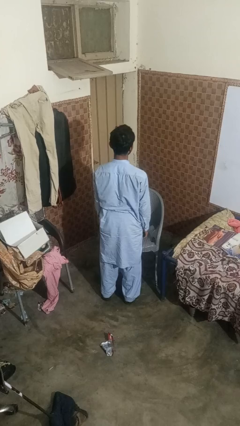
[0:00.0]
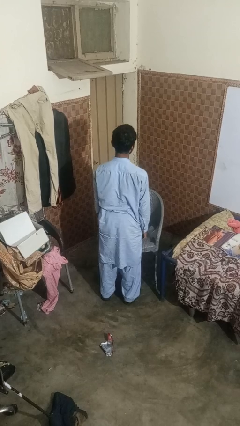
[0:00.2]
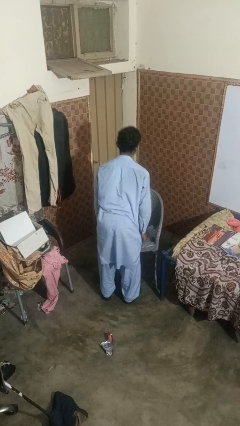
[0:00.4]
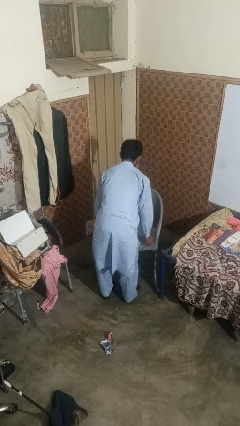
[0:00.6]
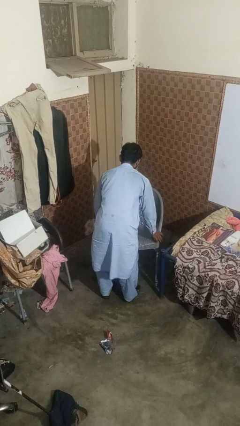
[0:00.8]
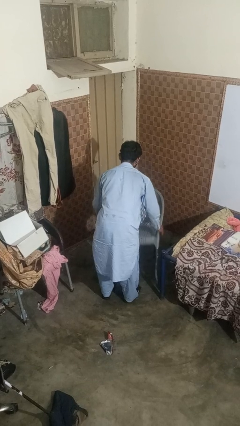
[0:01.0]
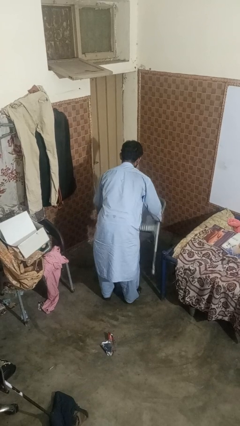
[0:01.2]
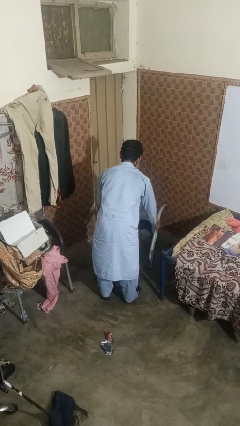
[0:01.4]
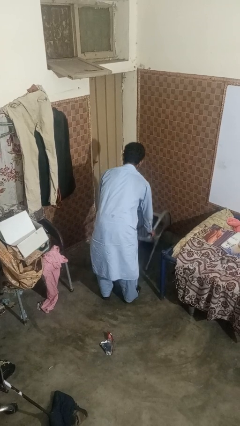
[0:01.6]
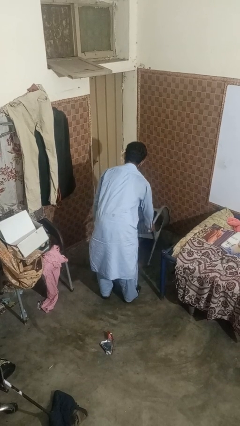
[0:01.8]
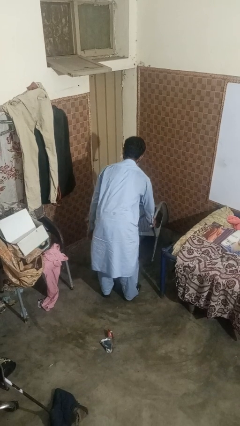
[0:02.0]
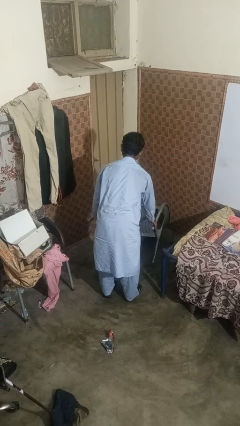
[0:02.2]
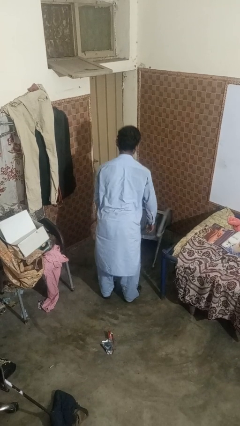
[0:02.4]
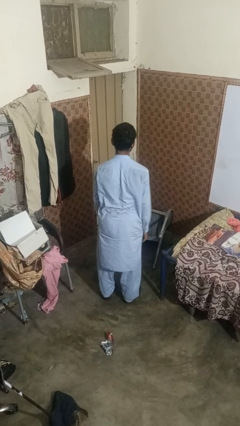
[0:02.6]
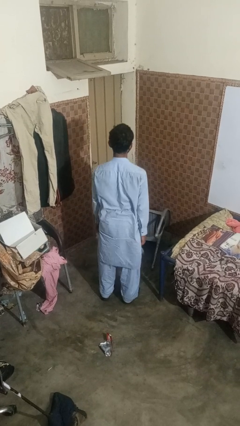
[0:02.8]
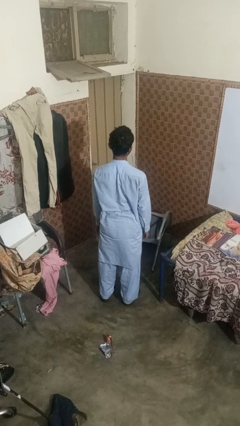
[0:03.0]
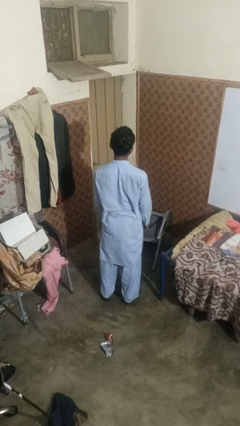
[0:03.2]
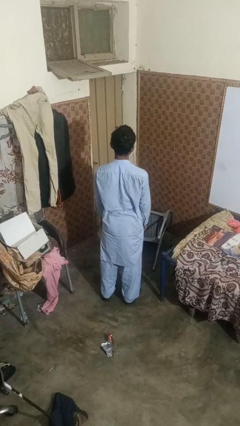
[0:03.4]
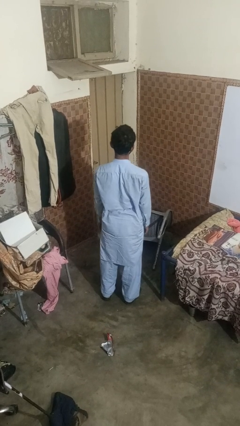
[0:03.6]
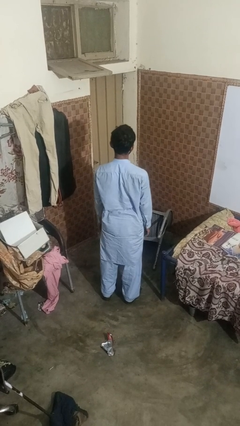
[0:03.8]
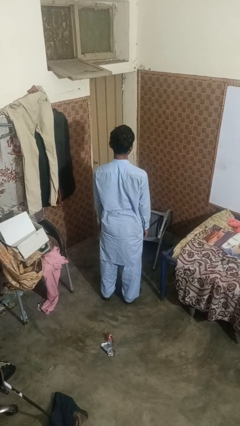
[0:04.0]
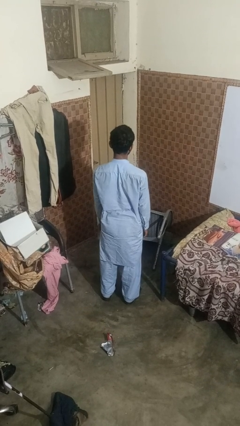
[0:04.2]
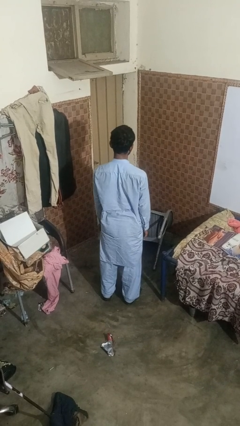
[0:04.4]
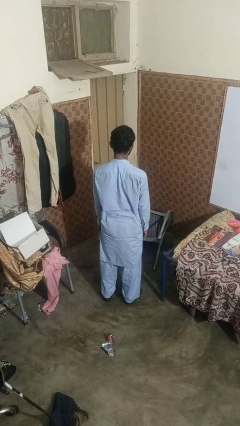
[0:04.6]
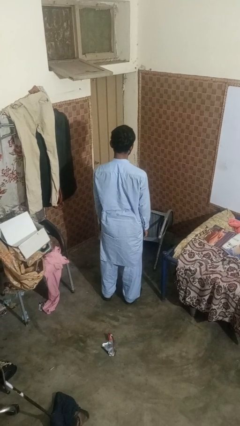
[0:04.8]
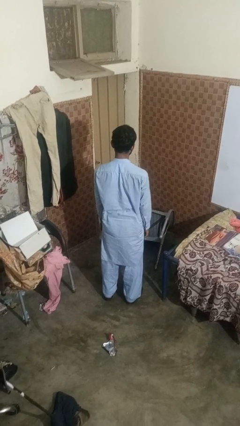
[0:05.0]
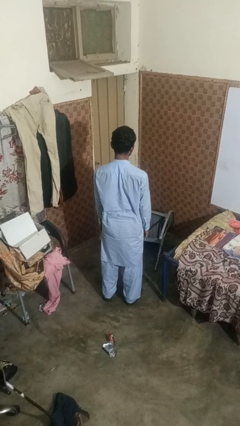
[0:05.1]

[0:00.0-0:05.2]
person knocks over furniture

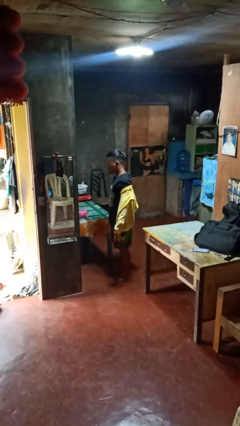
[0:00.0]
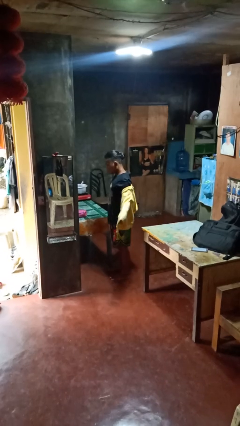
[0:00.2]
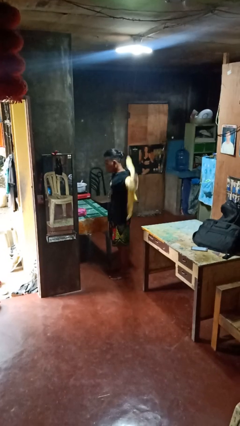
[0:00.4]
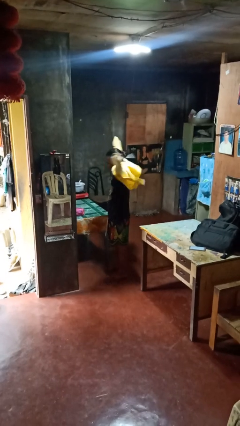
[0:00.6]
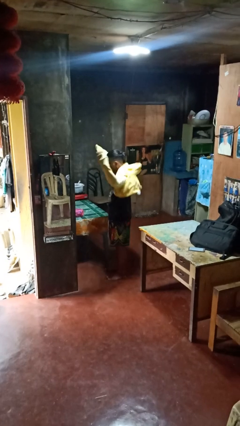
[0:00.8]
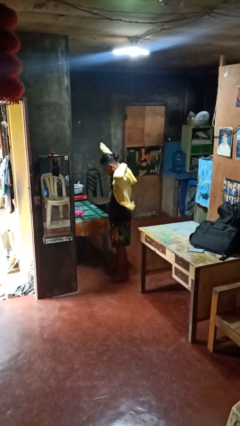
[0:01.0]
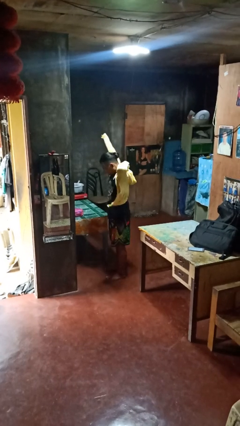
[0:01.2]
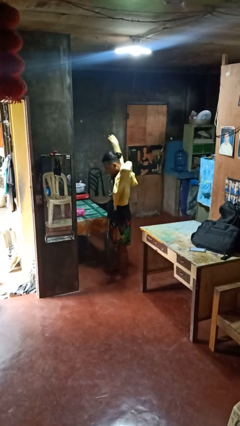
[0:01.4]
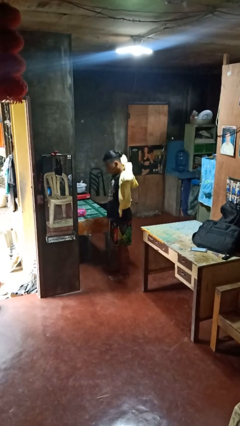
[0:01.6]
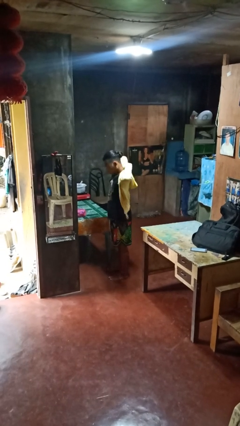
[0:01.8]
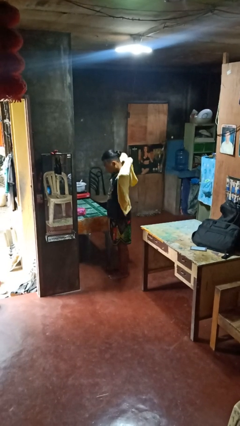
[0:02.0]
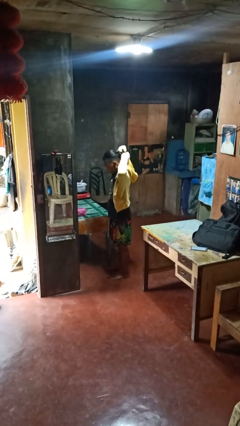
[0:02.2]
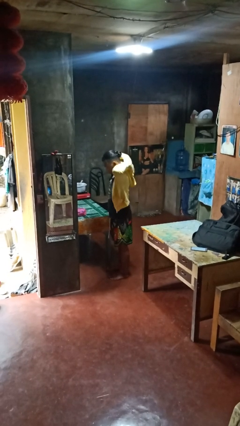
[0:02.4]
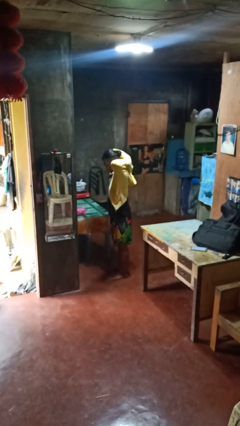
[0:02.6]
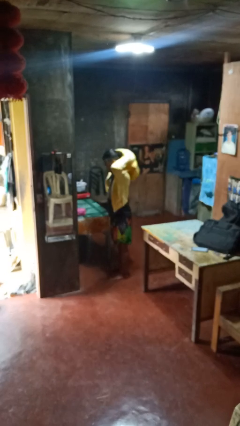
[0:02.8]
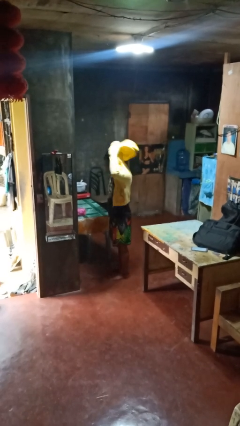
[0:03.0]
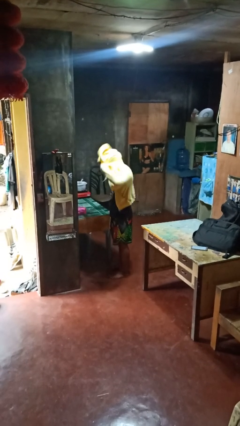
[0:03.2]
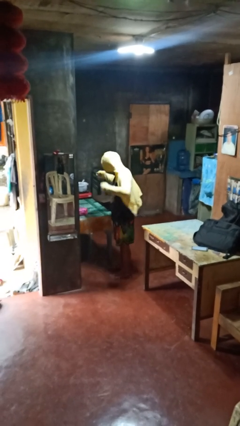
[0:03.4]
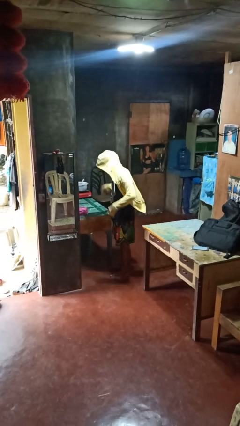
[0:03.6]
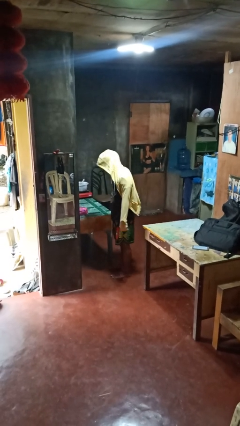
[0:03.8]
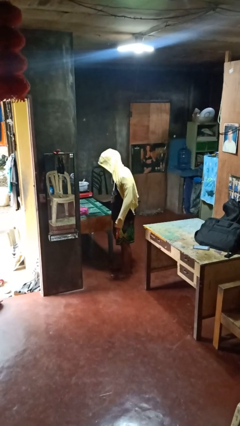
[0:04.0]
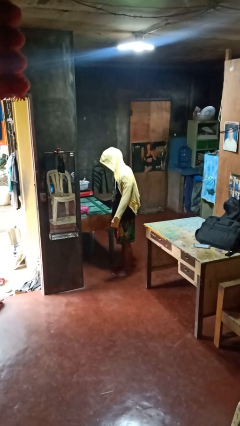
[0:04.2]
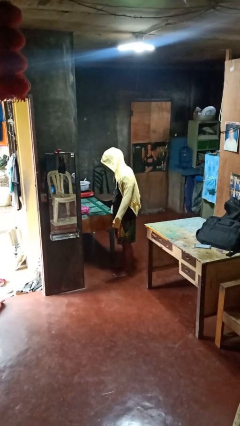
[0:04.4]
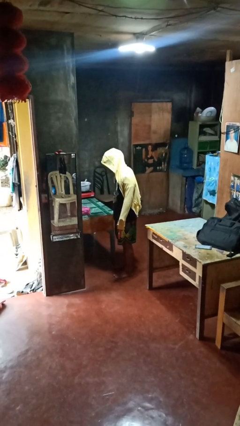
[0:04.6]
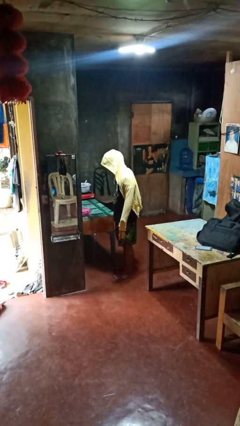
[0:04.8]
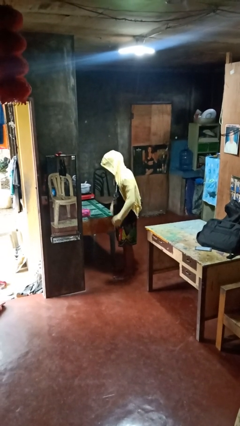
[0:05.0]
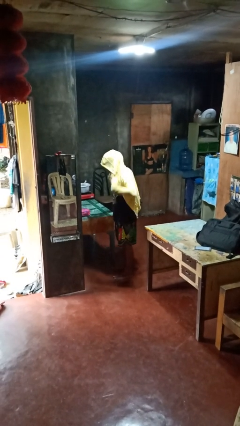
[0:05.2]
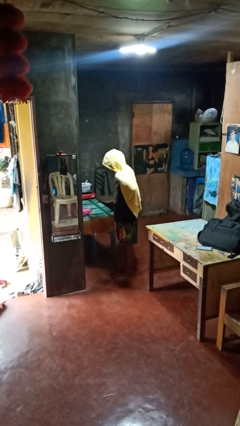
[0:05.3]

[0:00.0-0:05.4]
person puts on hoodie

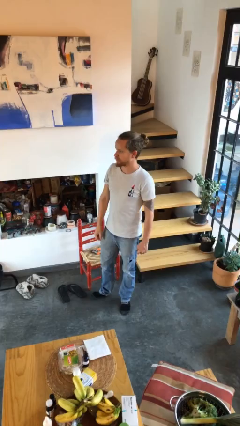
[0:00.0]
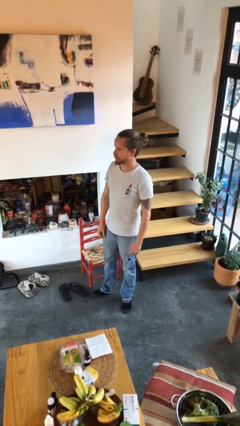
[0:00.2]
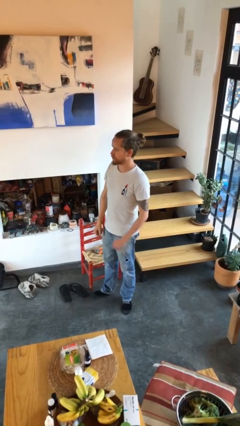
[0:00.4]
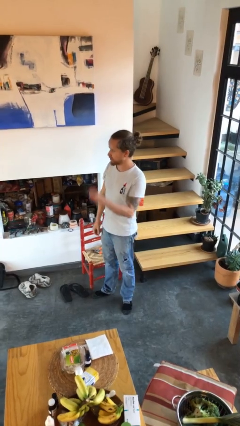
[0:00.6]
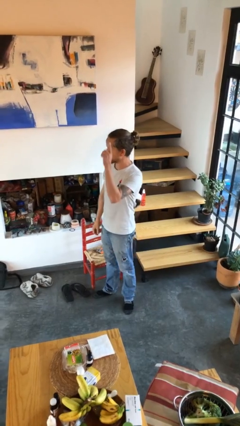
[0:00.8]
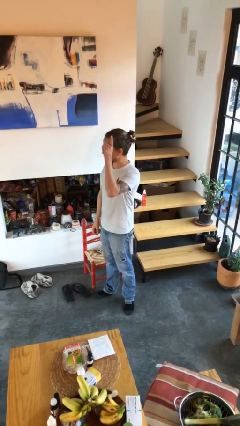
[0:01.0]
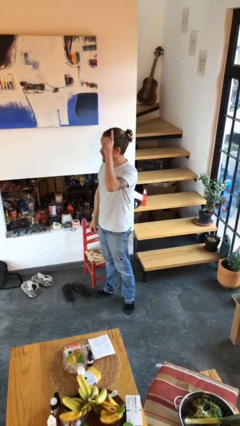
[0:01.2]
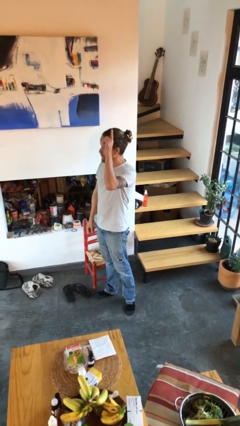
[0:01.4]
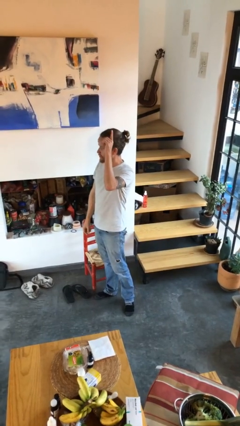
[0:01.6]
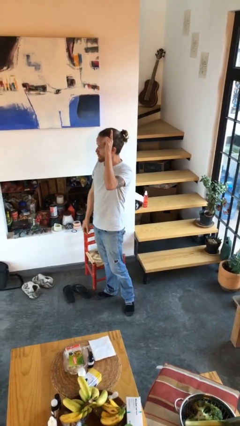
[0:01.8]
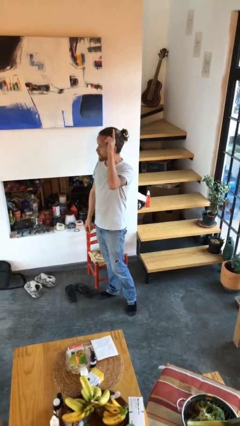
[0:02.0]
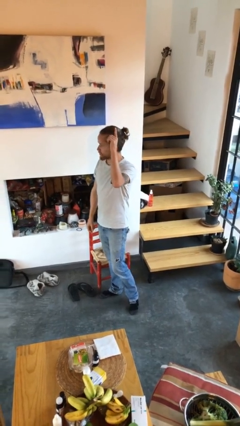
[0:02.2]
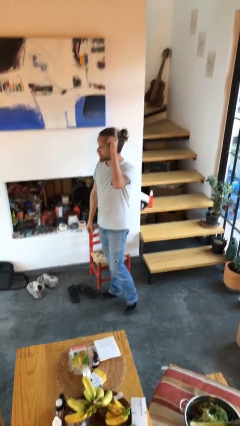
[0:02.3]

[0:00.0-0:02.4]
person gestures raise hand

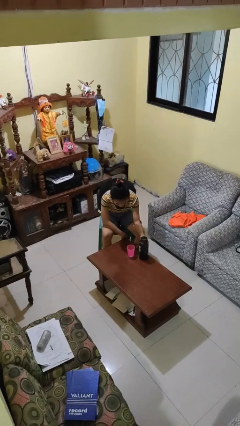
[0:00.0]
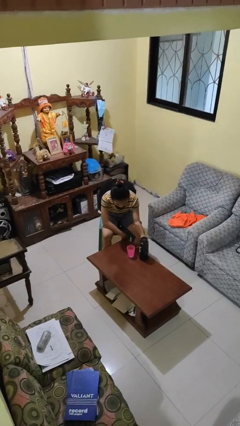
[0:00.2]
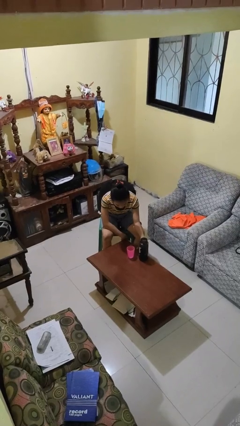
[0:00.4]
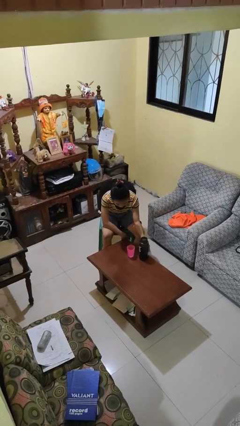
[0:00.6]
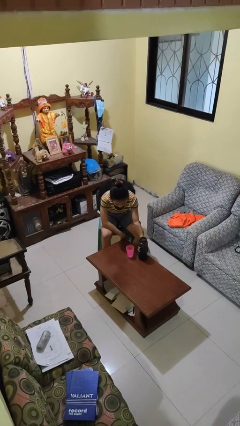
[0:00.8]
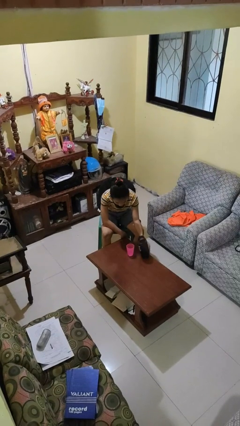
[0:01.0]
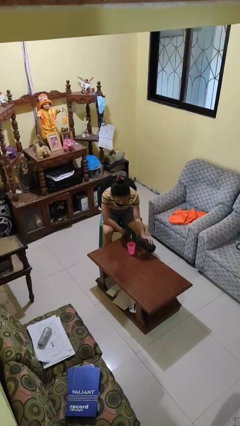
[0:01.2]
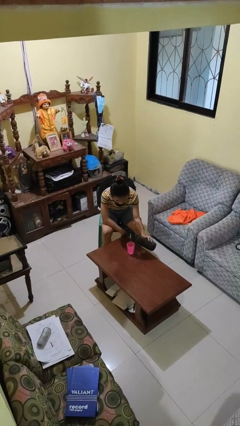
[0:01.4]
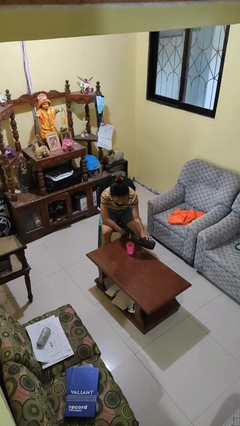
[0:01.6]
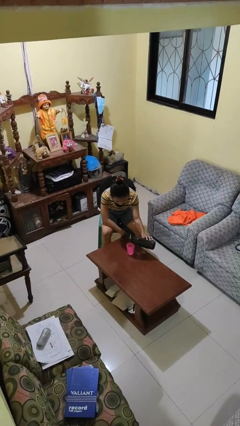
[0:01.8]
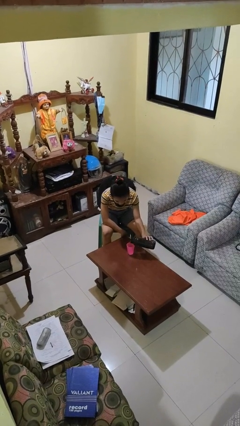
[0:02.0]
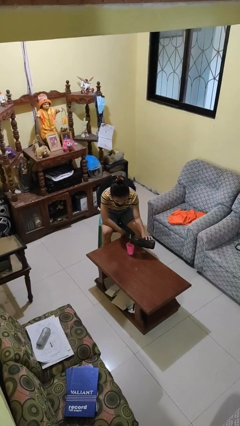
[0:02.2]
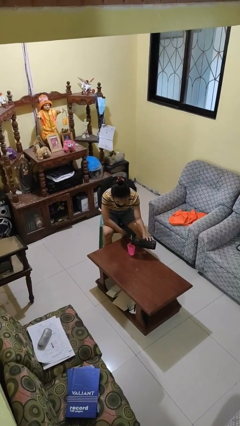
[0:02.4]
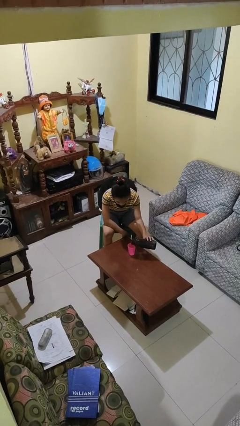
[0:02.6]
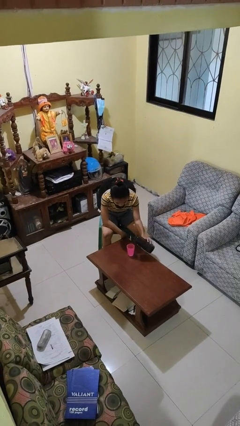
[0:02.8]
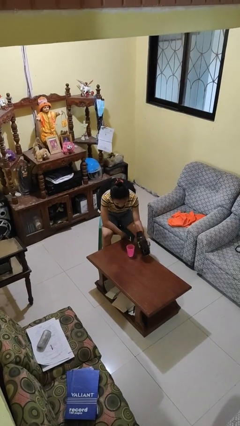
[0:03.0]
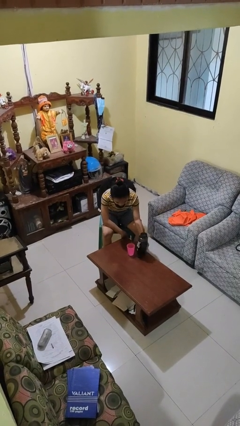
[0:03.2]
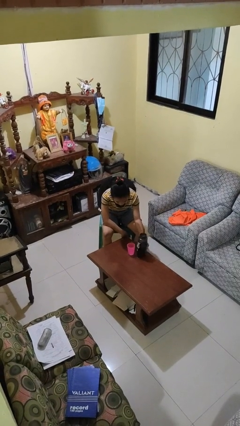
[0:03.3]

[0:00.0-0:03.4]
person pours liquid into cup

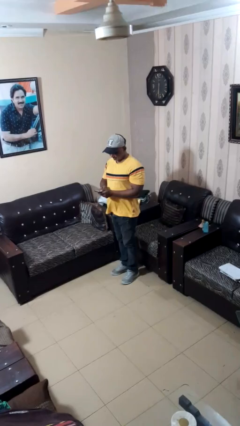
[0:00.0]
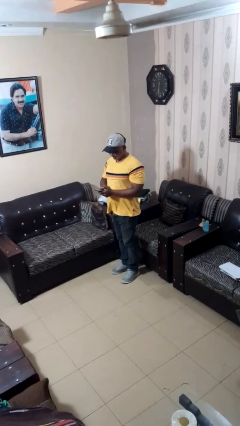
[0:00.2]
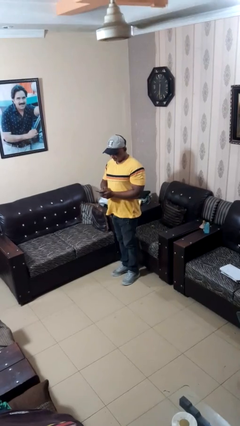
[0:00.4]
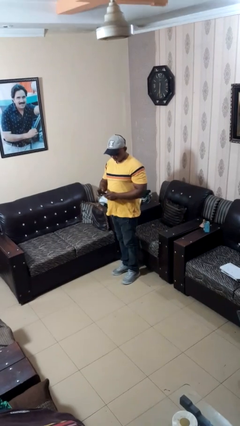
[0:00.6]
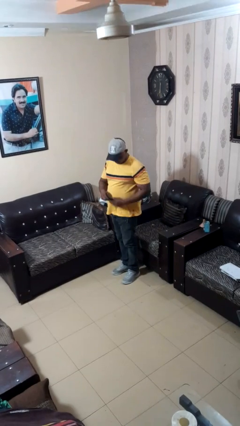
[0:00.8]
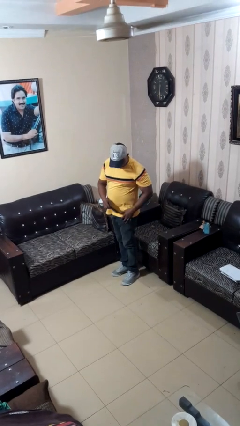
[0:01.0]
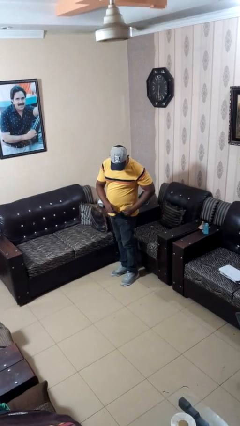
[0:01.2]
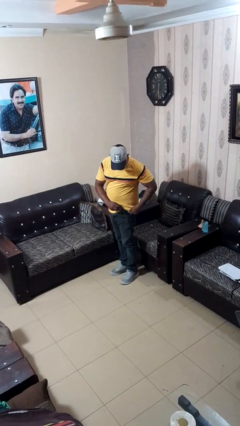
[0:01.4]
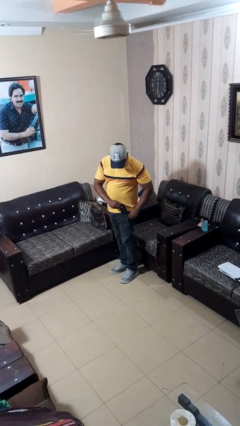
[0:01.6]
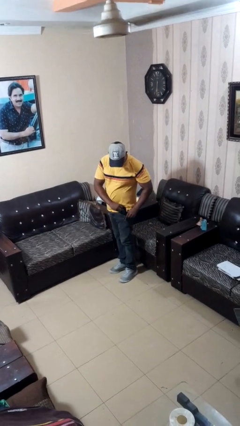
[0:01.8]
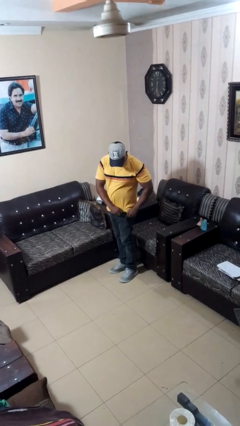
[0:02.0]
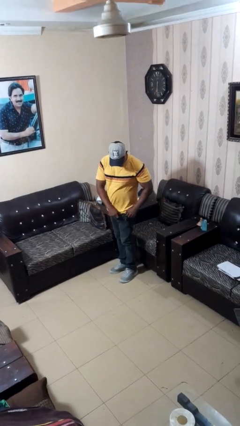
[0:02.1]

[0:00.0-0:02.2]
person puts phone into pocket
